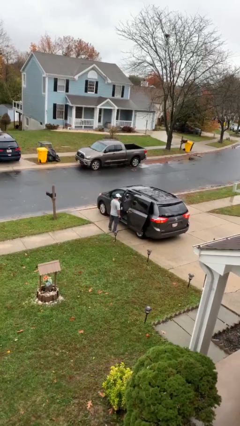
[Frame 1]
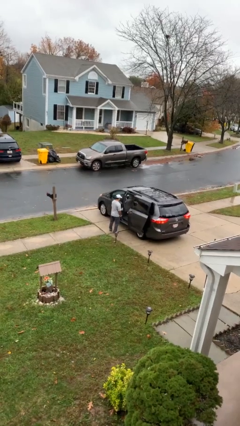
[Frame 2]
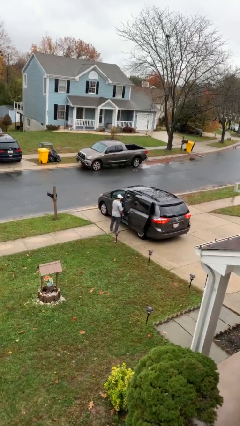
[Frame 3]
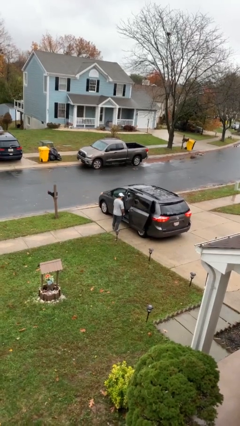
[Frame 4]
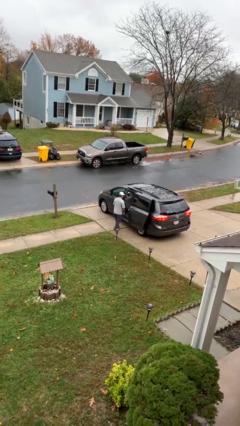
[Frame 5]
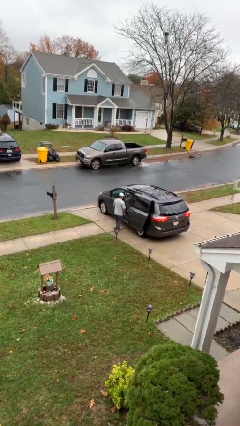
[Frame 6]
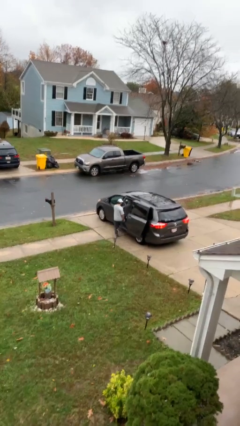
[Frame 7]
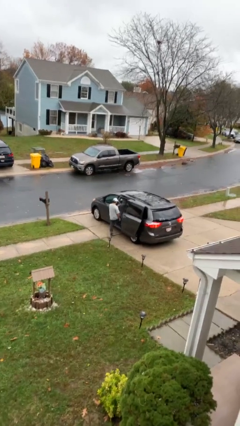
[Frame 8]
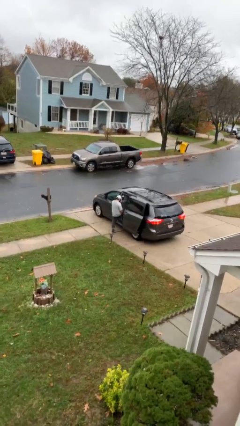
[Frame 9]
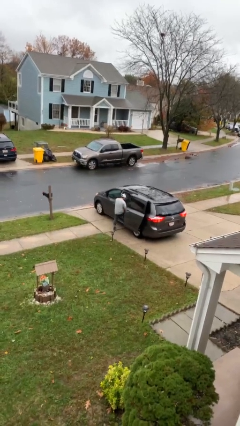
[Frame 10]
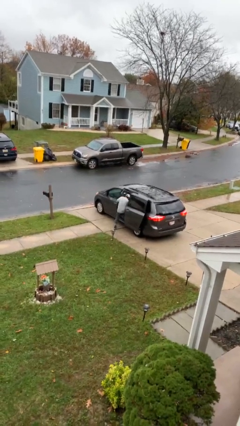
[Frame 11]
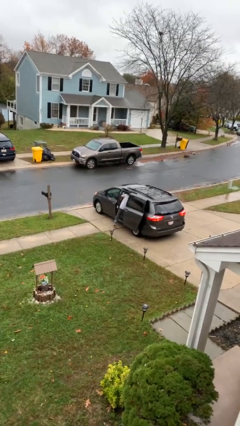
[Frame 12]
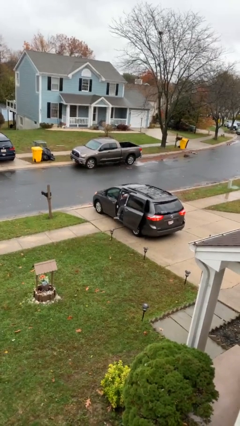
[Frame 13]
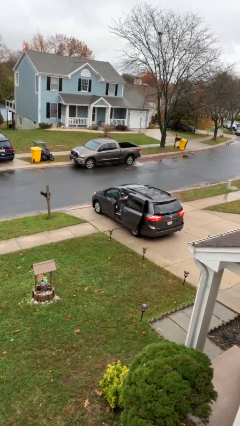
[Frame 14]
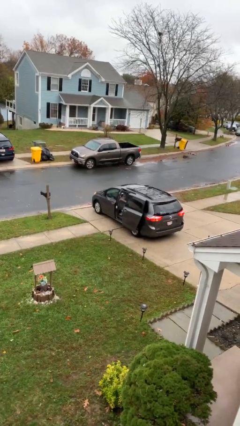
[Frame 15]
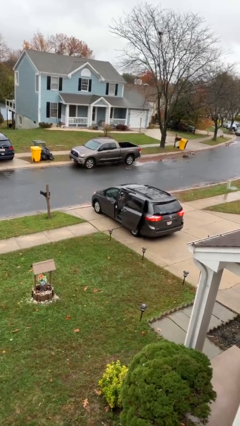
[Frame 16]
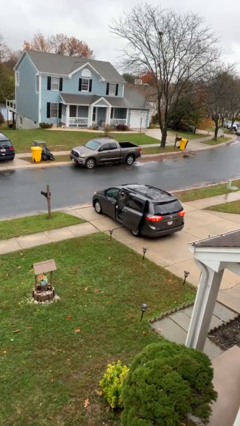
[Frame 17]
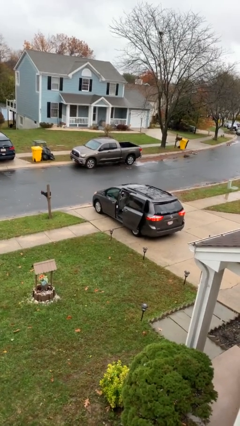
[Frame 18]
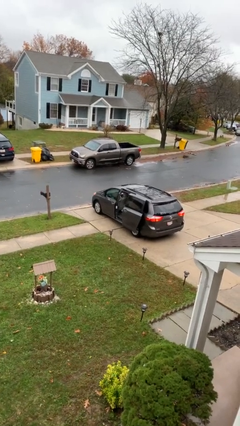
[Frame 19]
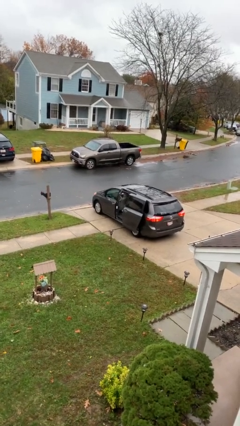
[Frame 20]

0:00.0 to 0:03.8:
person enters car

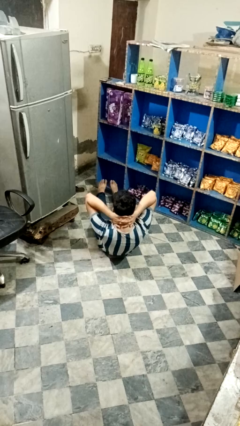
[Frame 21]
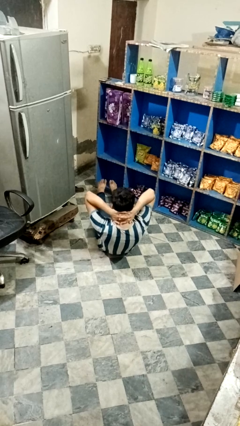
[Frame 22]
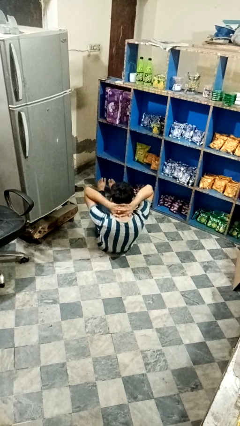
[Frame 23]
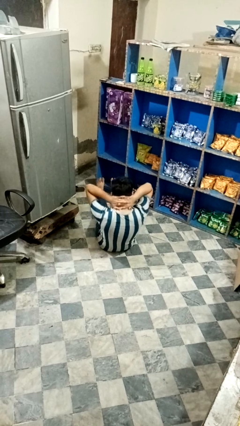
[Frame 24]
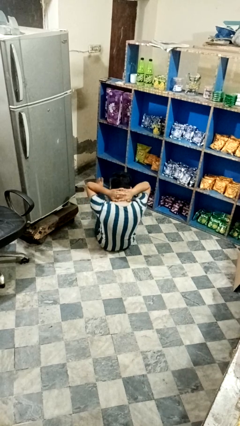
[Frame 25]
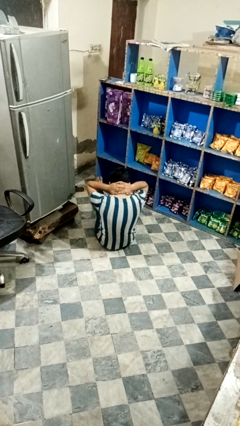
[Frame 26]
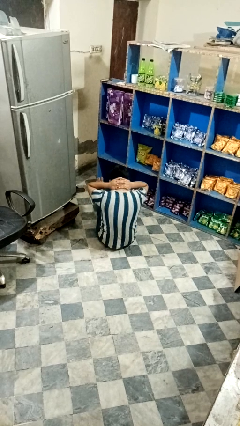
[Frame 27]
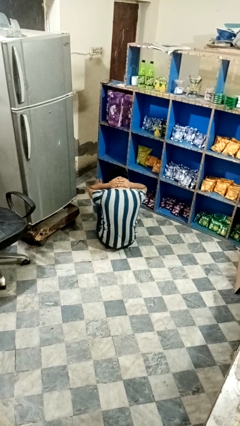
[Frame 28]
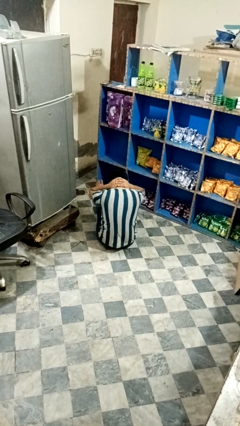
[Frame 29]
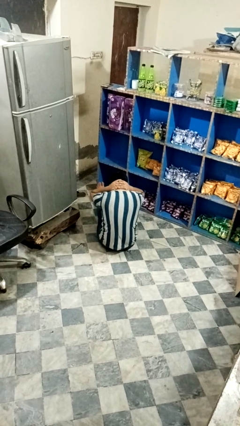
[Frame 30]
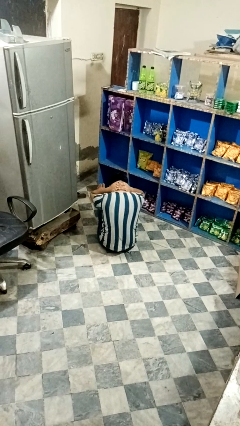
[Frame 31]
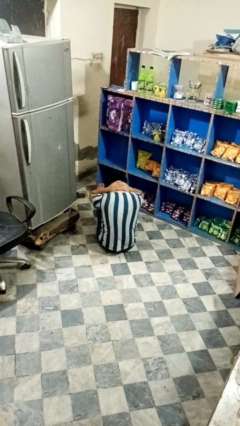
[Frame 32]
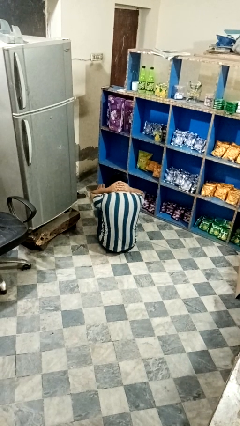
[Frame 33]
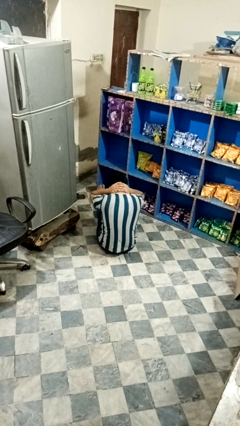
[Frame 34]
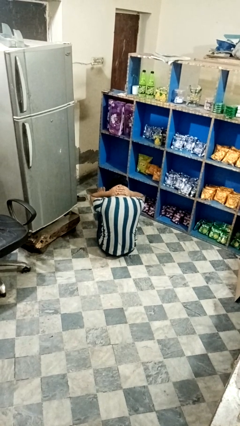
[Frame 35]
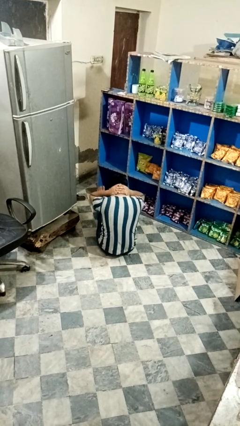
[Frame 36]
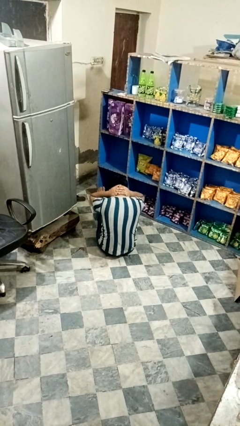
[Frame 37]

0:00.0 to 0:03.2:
person exercises with situp

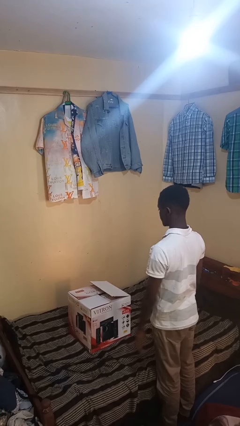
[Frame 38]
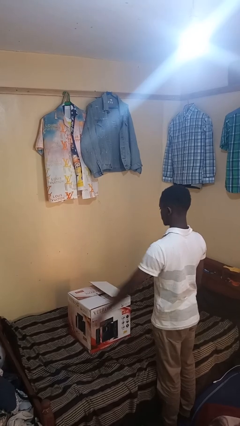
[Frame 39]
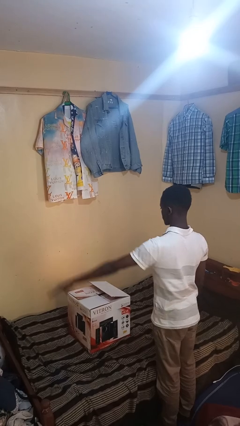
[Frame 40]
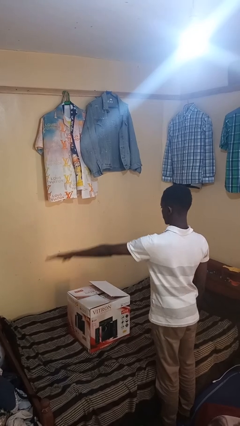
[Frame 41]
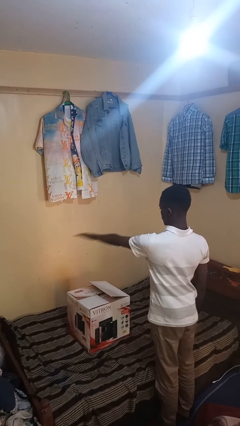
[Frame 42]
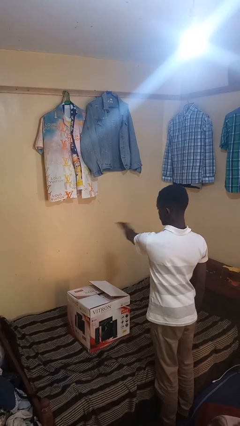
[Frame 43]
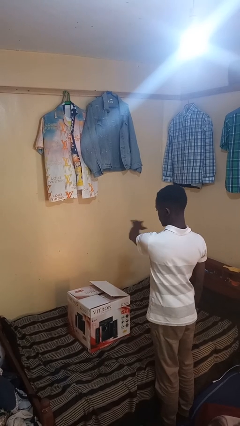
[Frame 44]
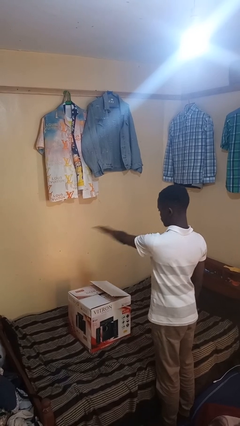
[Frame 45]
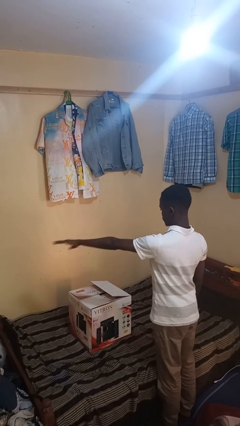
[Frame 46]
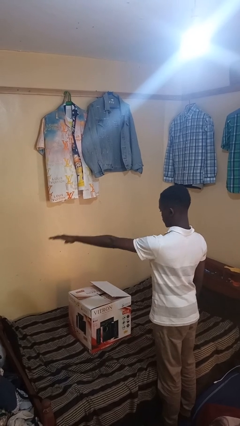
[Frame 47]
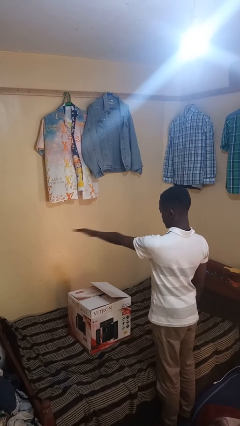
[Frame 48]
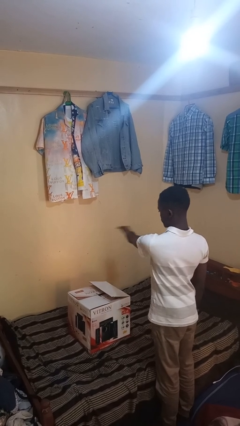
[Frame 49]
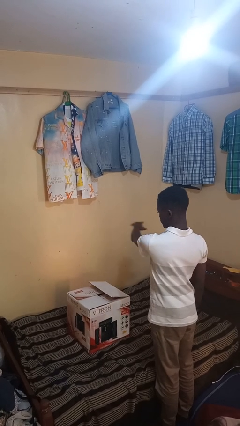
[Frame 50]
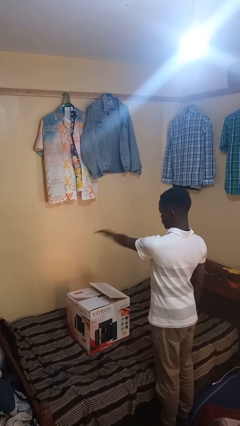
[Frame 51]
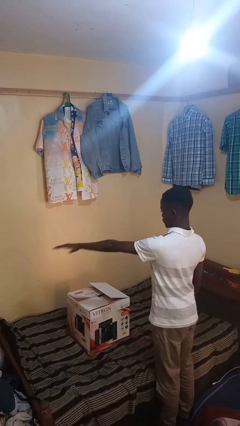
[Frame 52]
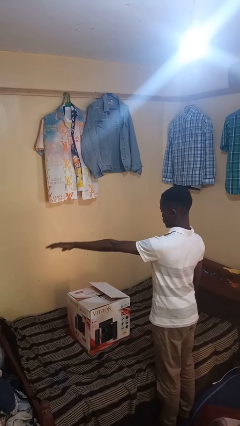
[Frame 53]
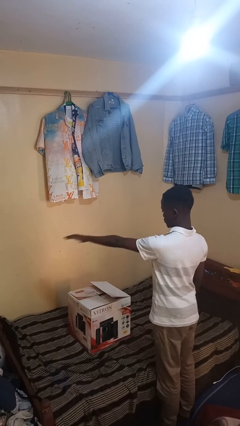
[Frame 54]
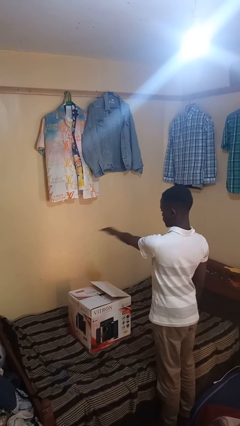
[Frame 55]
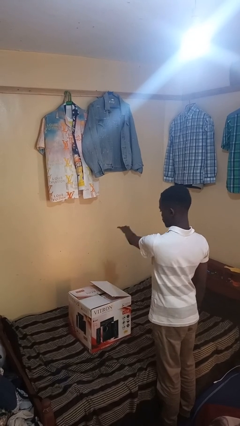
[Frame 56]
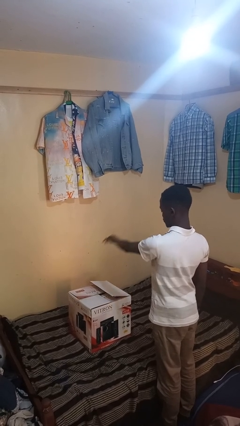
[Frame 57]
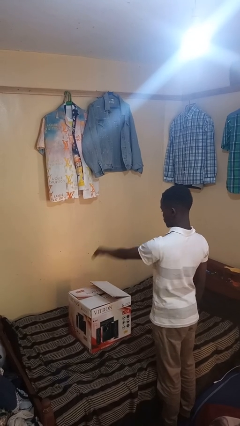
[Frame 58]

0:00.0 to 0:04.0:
person waves hand over object

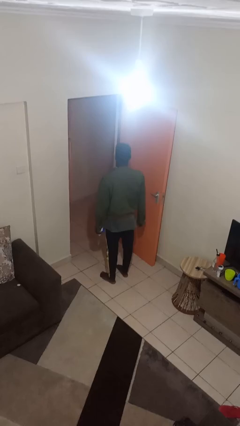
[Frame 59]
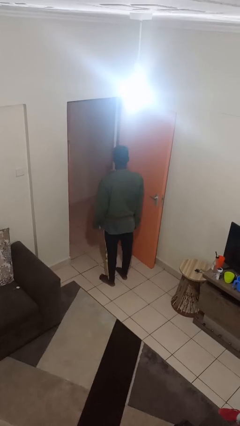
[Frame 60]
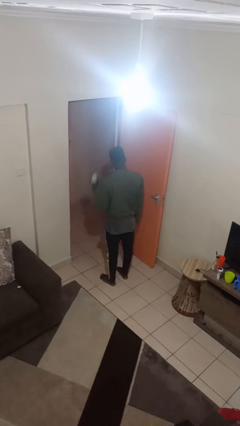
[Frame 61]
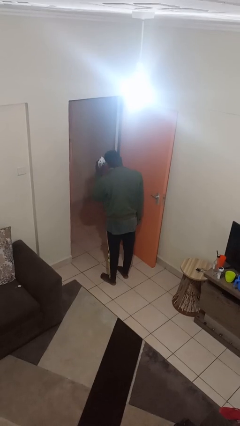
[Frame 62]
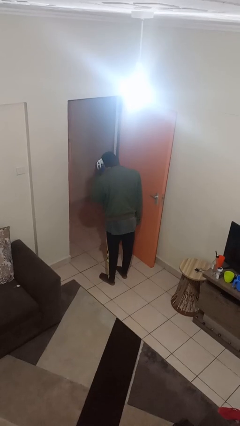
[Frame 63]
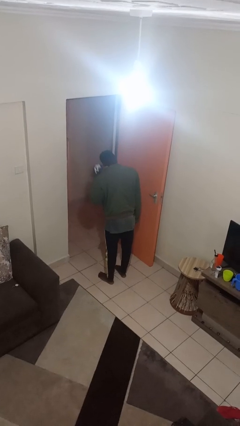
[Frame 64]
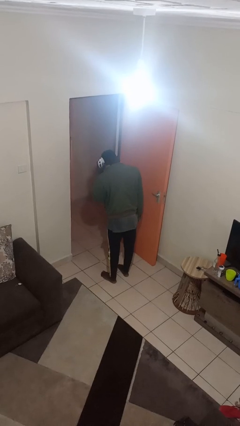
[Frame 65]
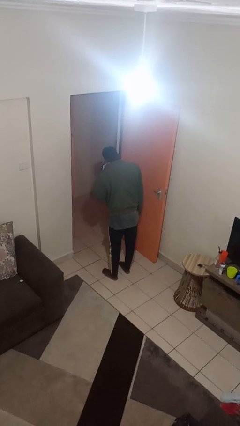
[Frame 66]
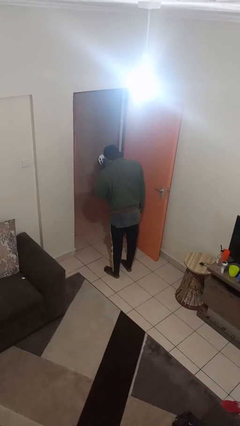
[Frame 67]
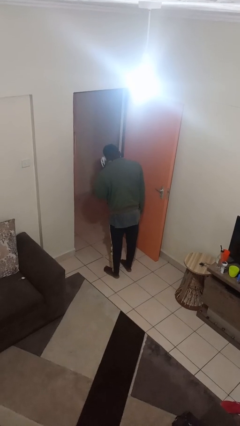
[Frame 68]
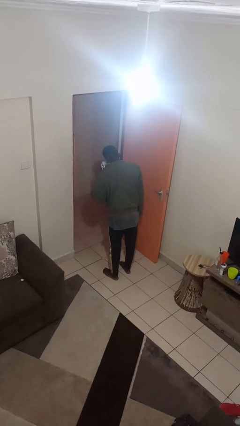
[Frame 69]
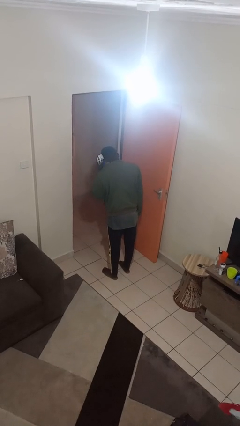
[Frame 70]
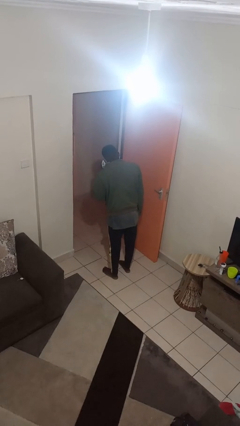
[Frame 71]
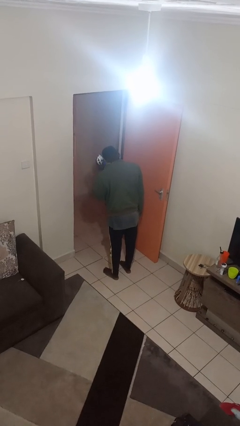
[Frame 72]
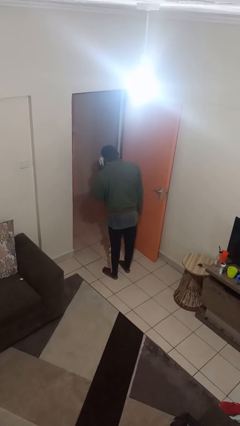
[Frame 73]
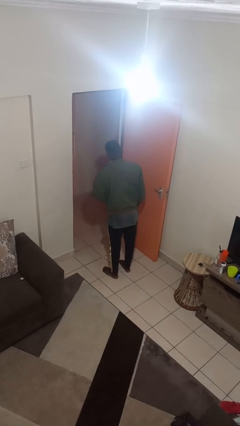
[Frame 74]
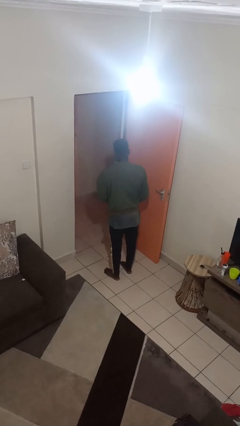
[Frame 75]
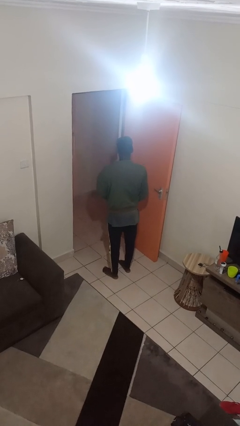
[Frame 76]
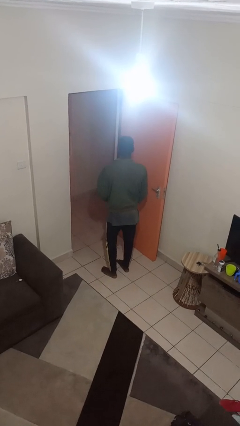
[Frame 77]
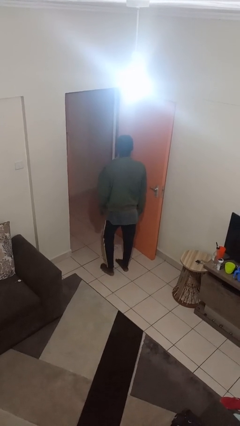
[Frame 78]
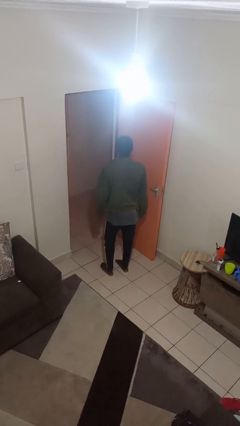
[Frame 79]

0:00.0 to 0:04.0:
person brushes hair

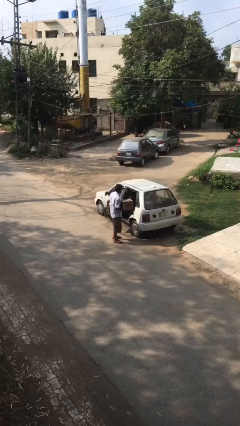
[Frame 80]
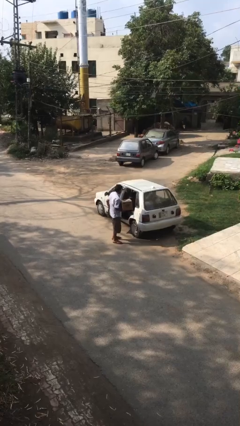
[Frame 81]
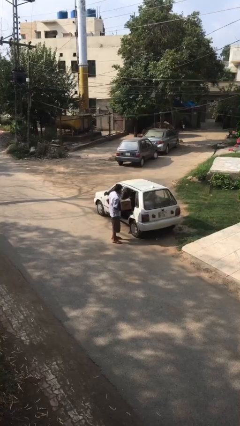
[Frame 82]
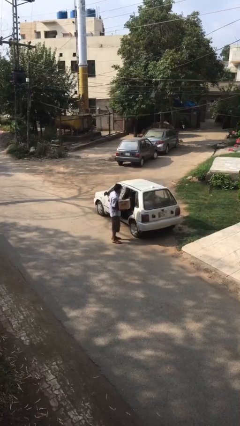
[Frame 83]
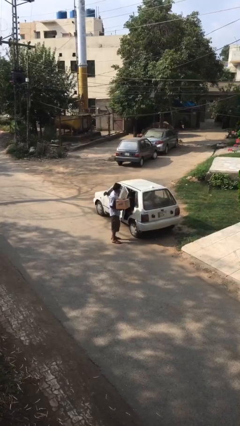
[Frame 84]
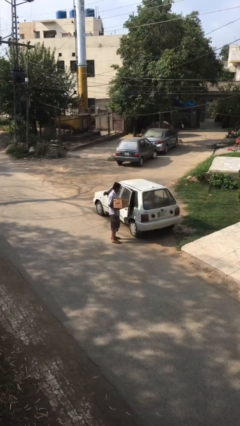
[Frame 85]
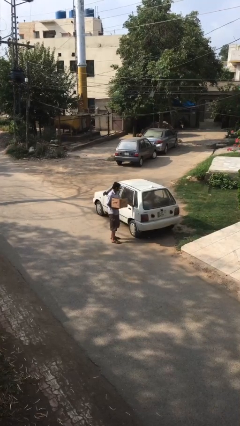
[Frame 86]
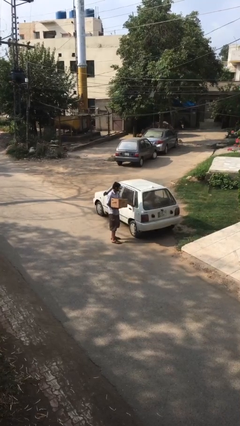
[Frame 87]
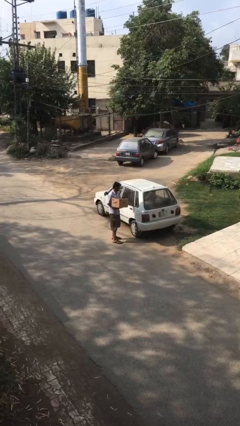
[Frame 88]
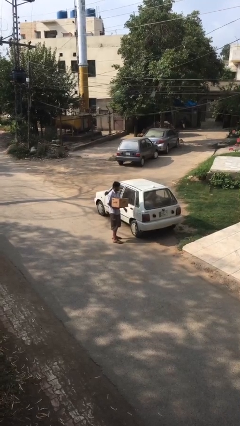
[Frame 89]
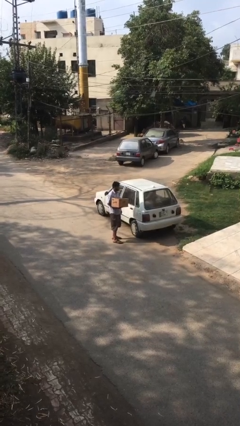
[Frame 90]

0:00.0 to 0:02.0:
person closes car door

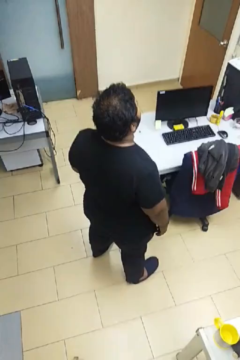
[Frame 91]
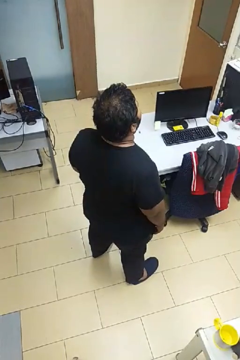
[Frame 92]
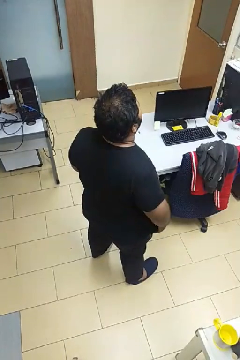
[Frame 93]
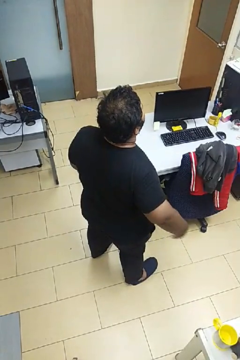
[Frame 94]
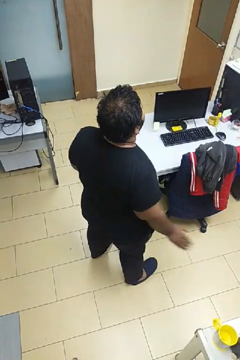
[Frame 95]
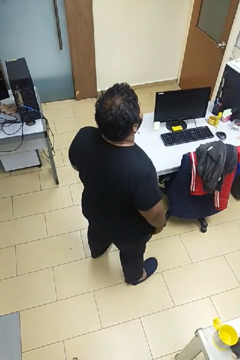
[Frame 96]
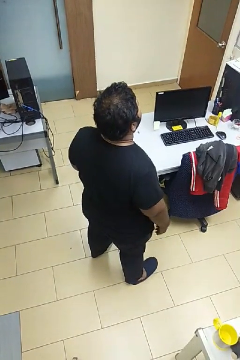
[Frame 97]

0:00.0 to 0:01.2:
person slaps hands on thighs
